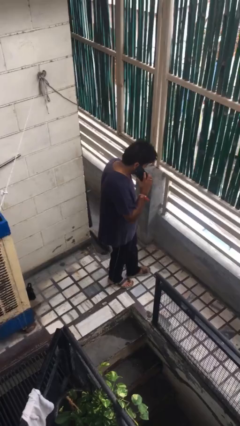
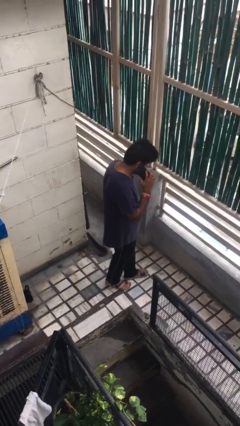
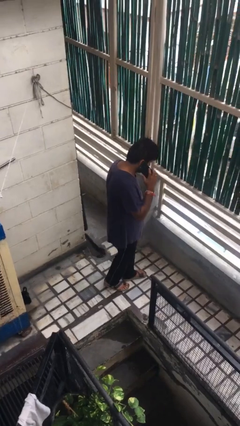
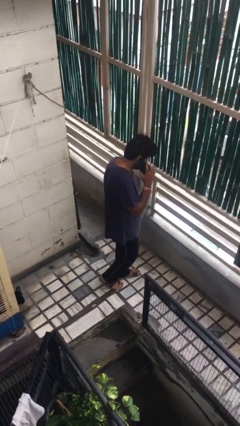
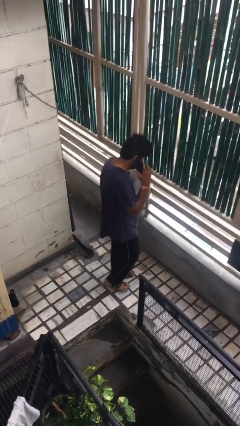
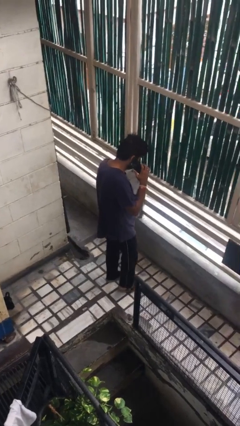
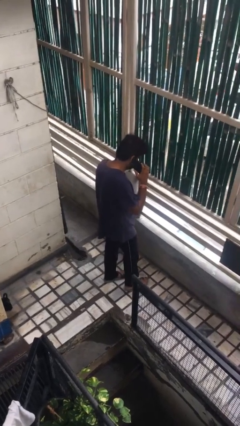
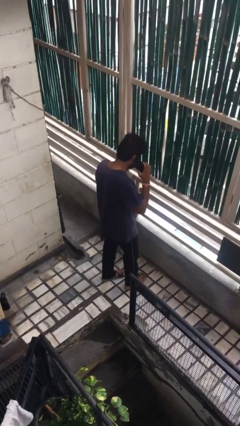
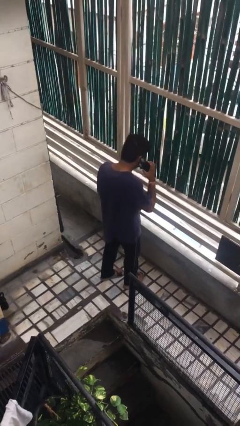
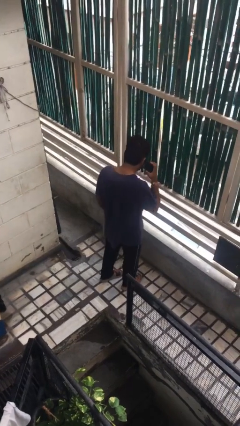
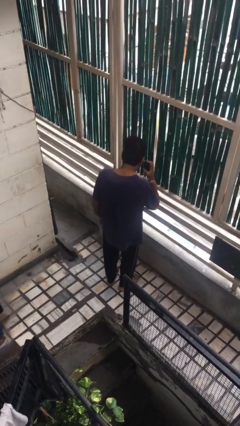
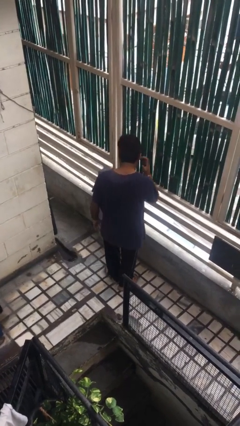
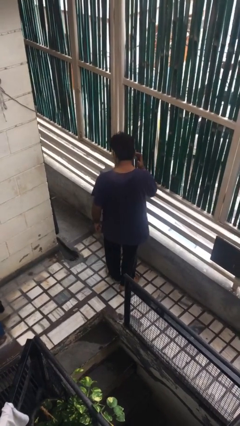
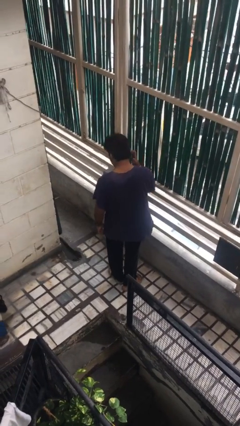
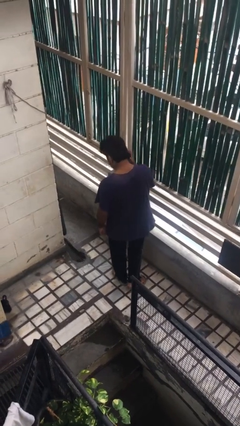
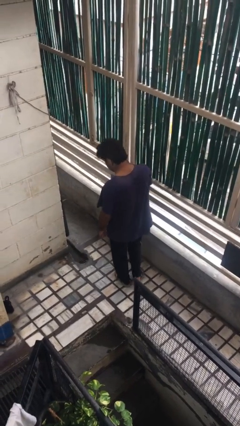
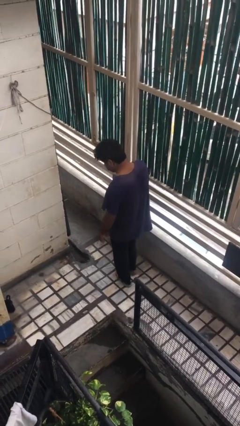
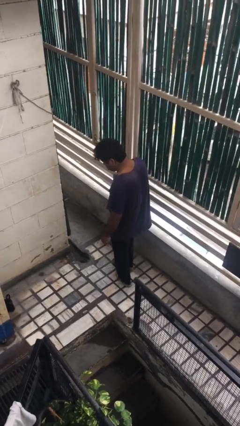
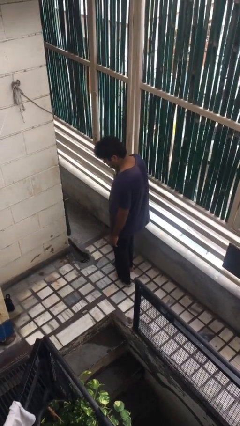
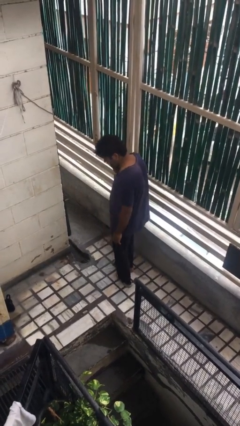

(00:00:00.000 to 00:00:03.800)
person talks on phone

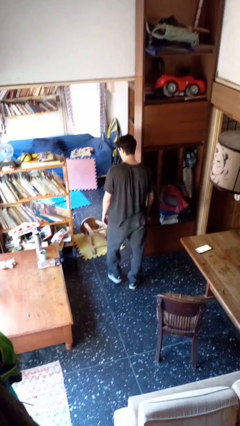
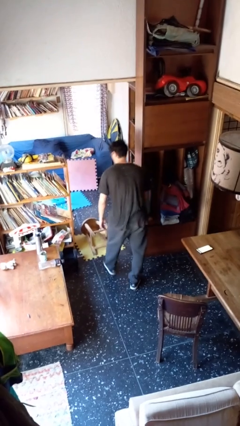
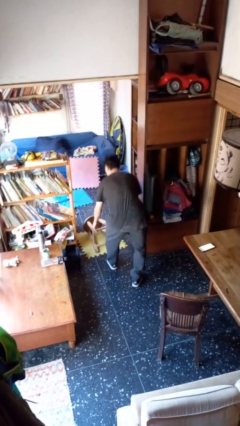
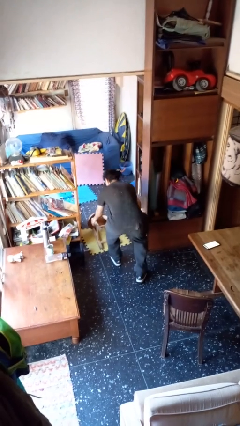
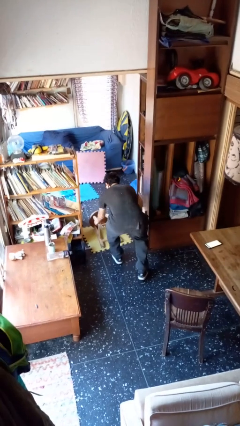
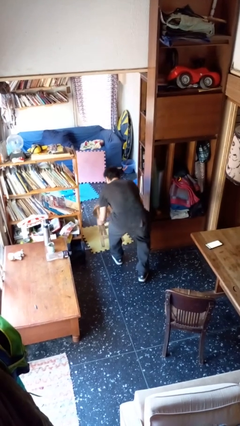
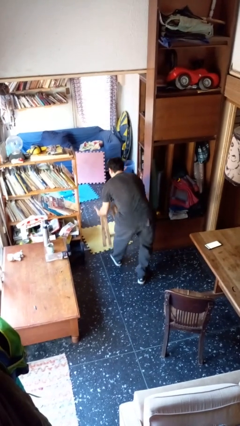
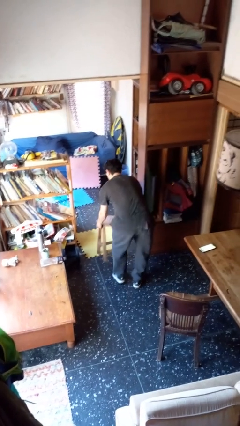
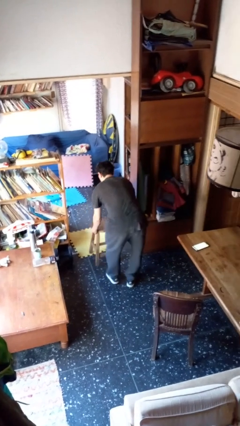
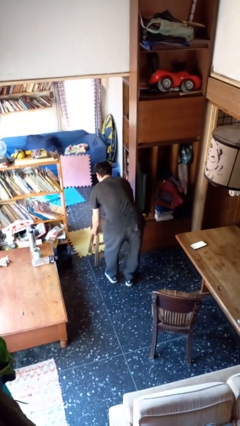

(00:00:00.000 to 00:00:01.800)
person sets upright furniture

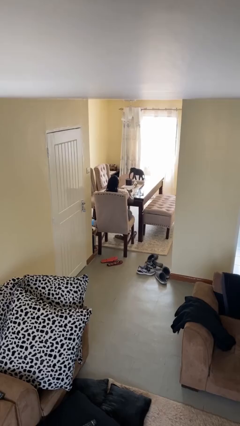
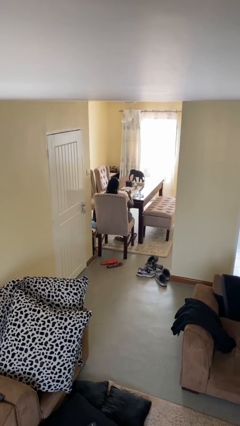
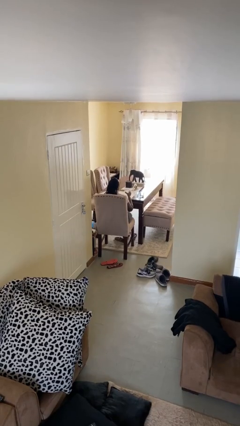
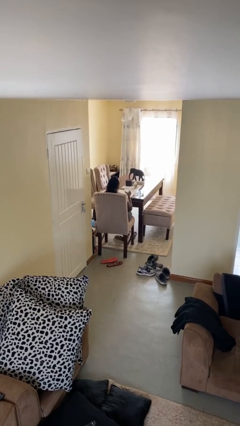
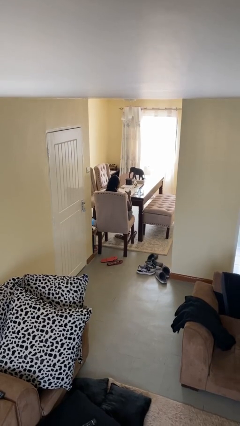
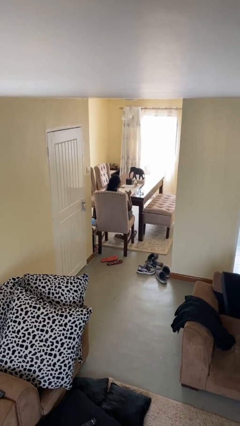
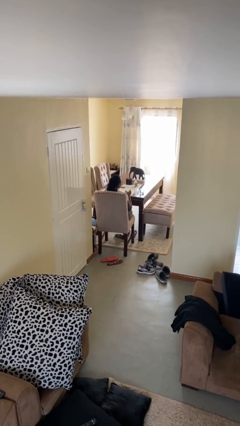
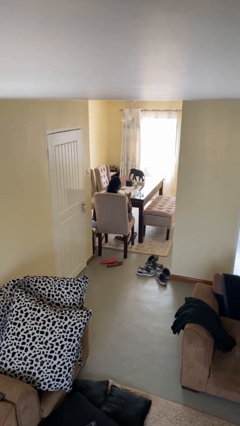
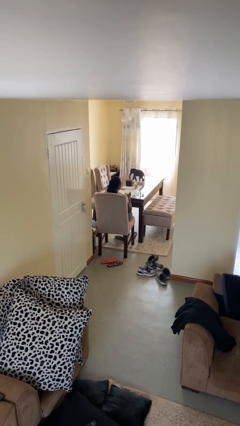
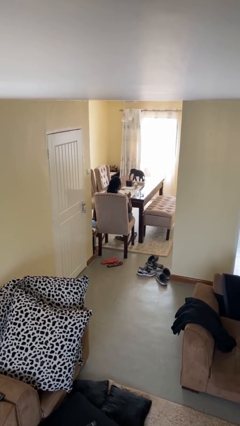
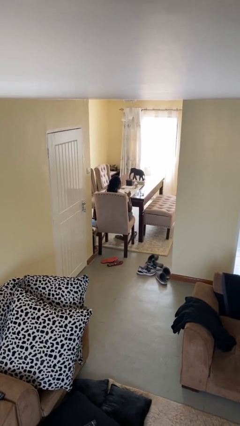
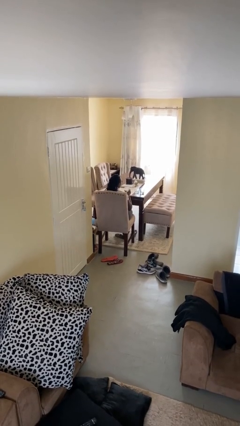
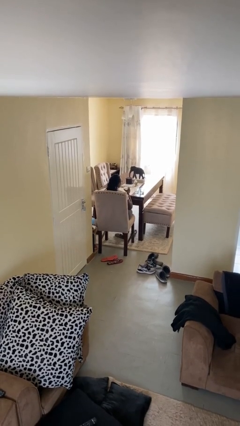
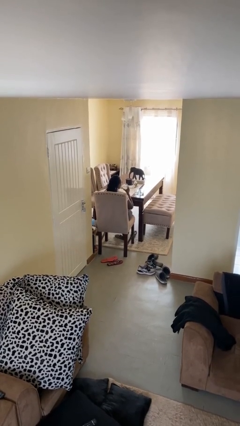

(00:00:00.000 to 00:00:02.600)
person picks up object from table

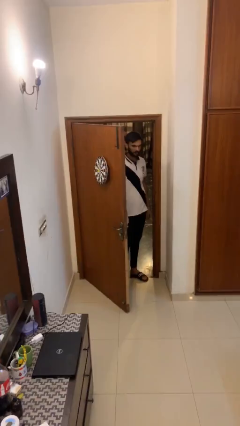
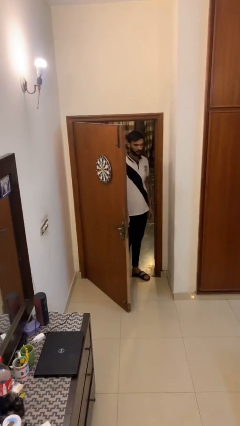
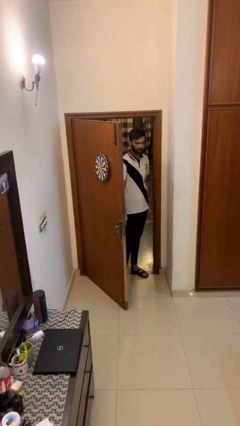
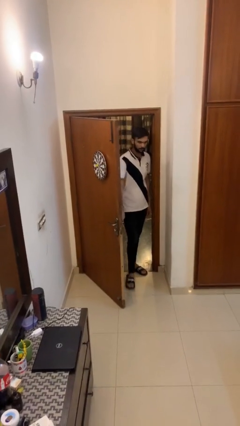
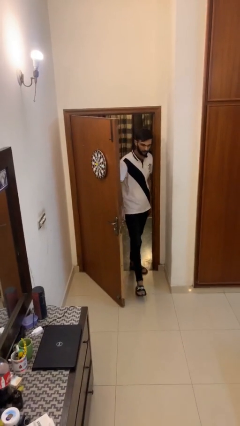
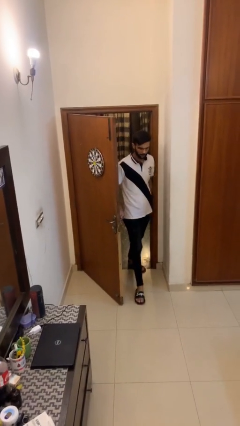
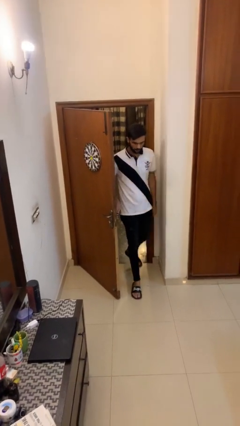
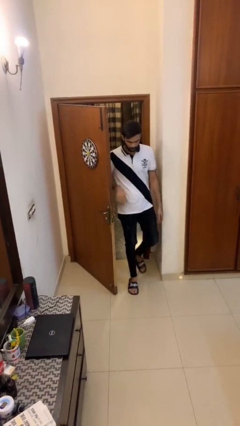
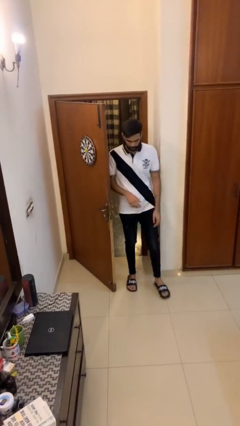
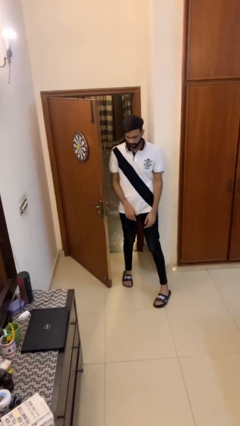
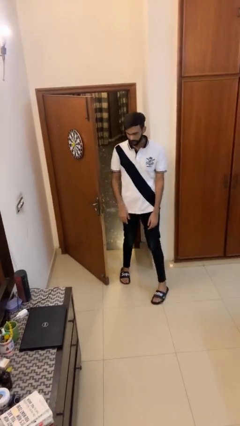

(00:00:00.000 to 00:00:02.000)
person enters scene through structure

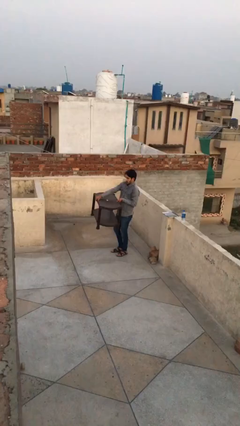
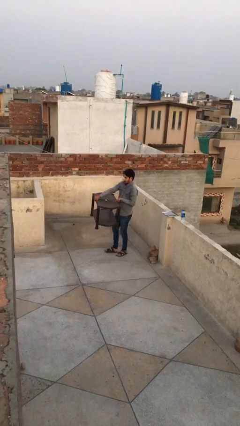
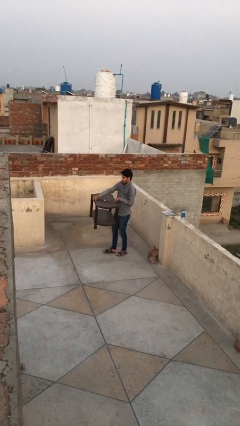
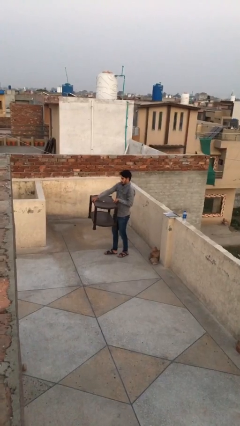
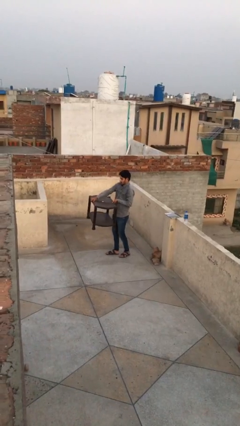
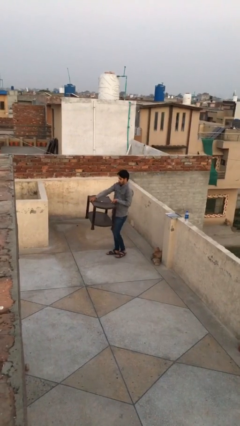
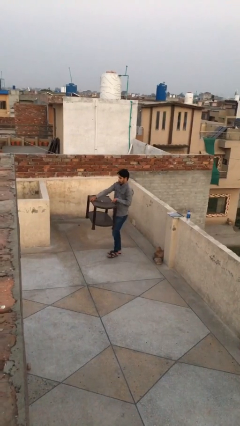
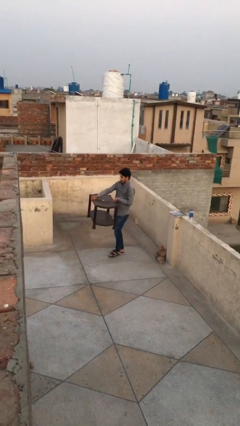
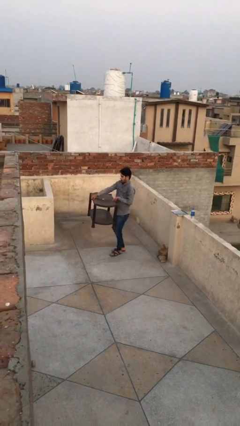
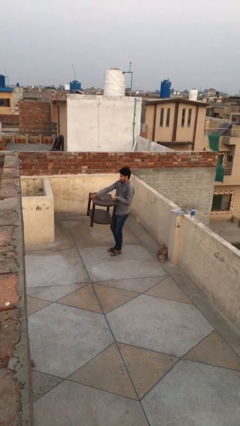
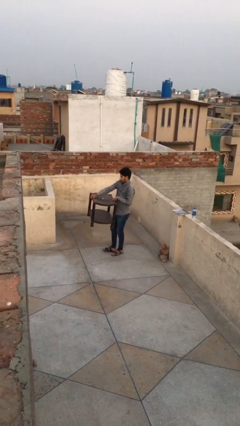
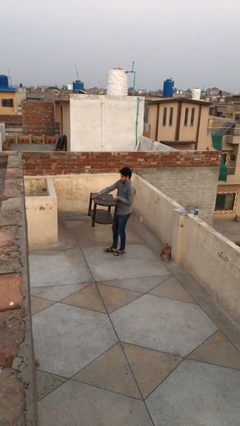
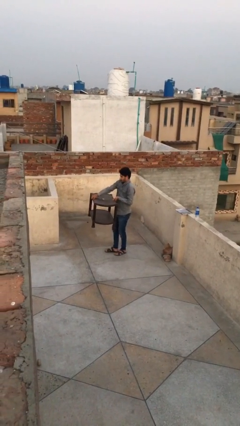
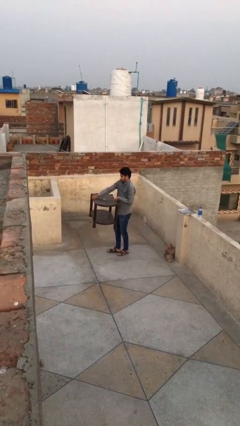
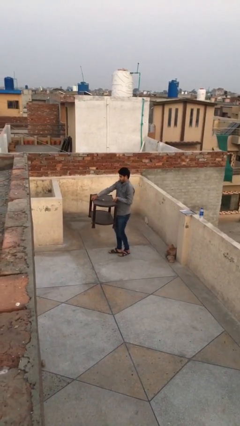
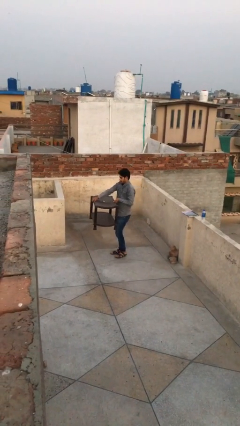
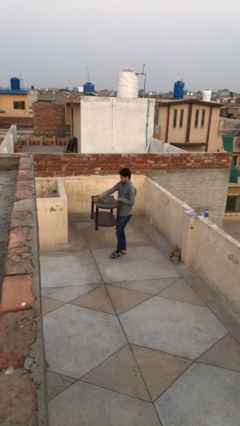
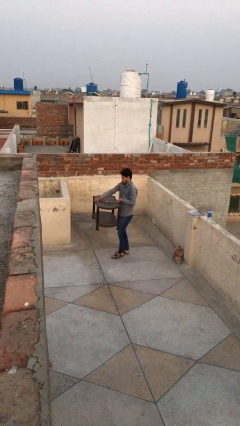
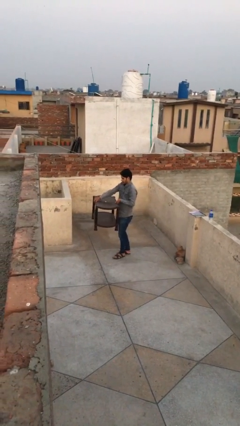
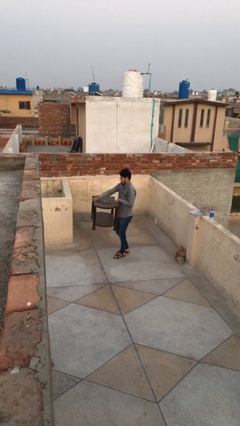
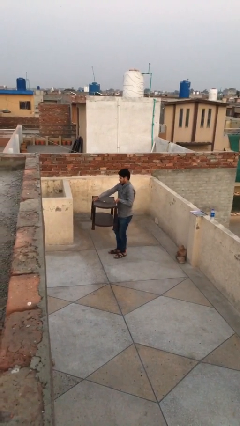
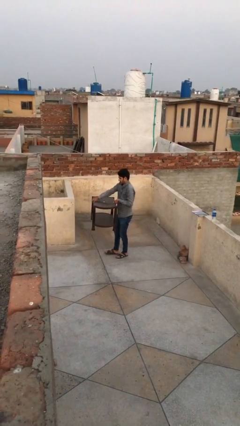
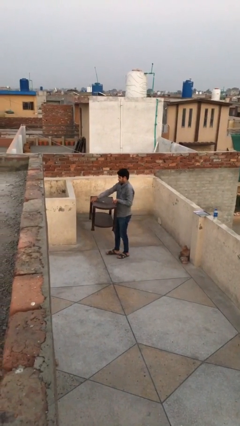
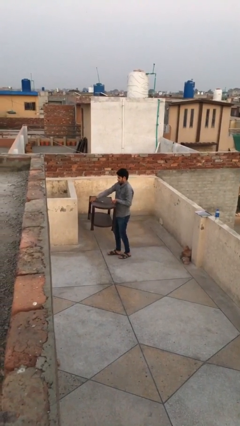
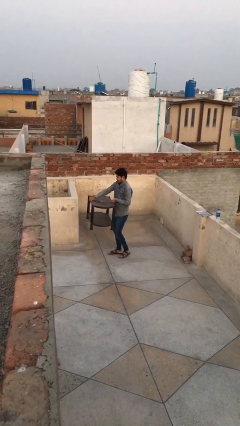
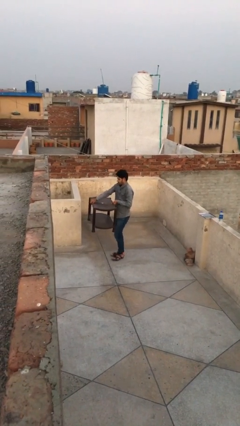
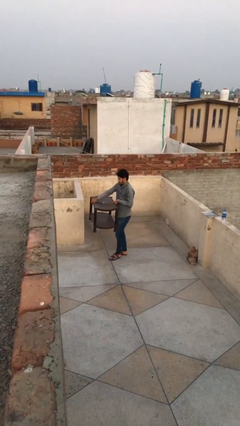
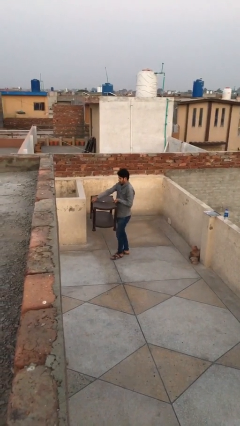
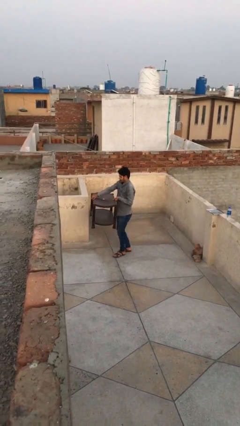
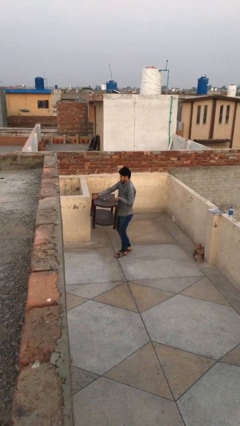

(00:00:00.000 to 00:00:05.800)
person carries heavy object

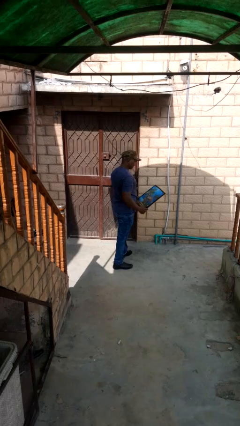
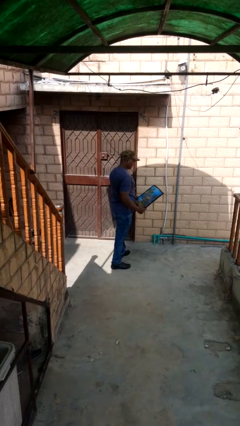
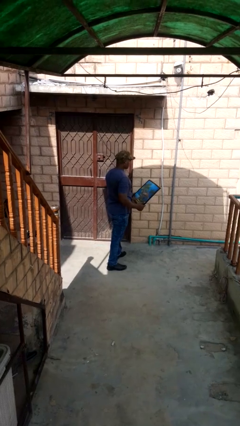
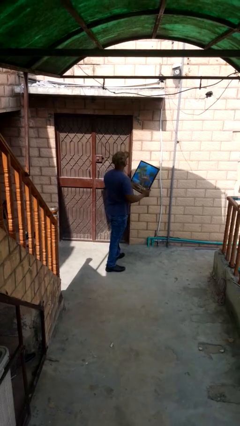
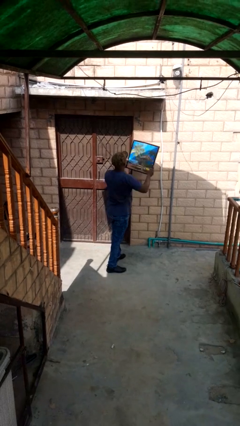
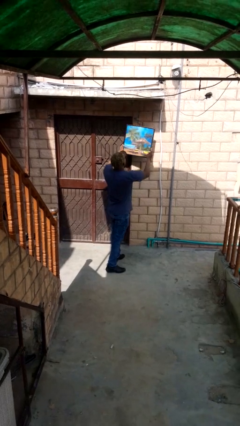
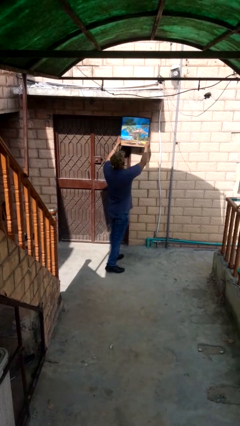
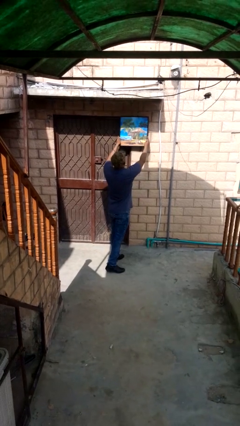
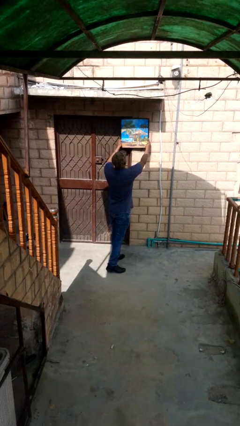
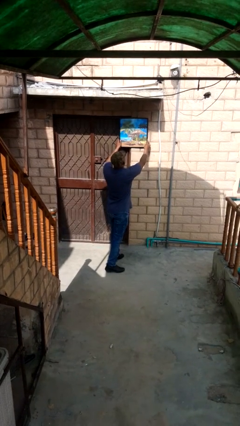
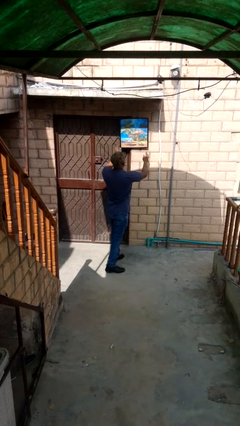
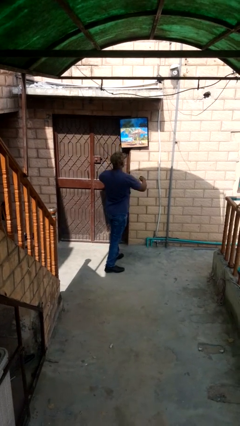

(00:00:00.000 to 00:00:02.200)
person puts up picture frame
